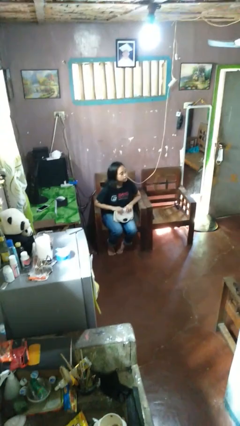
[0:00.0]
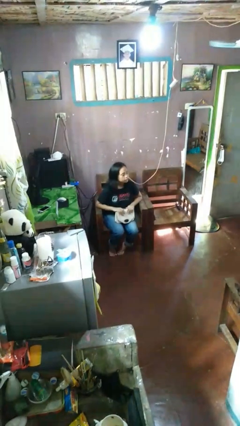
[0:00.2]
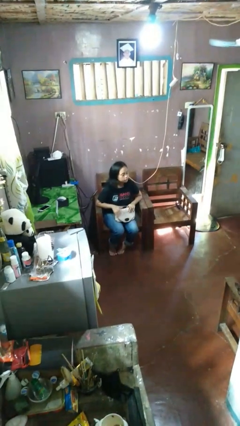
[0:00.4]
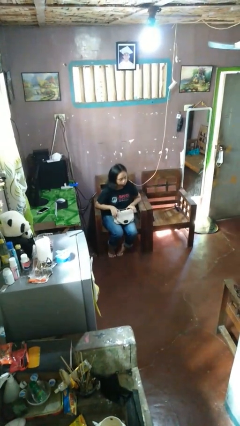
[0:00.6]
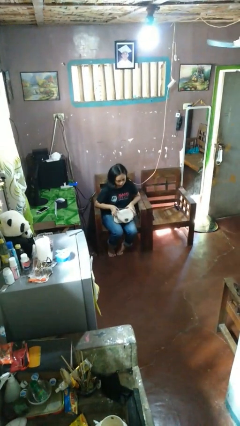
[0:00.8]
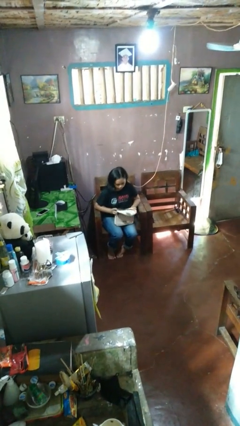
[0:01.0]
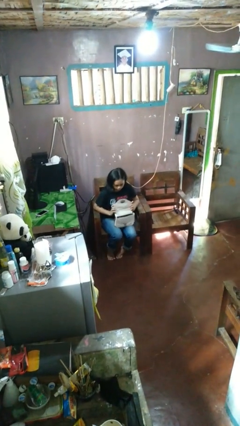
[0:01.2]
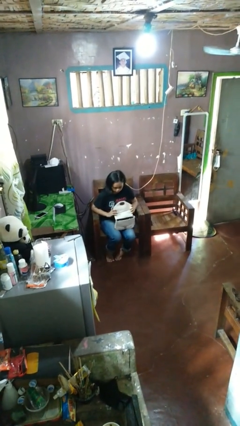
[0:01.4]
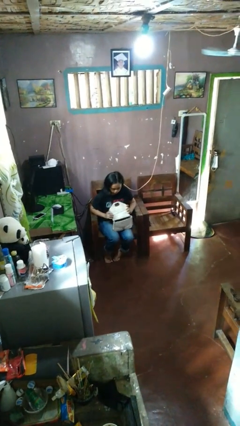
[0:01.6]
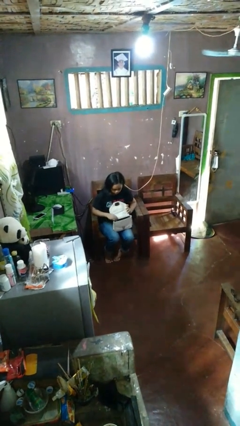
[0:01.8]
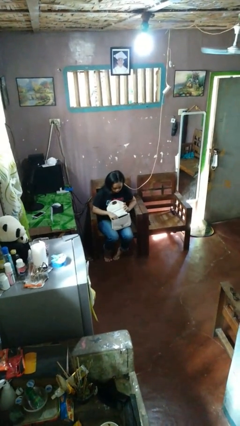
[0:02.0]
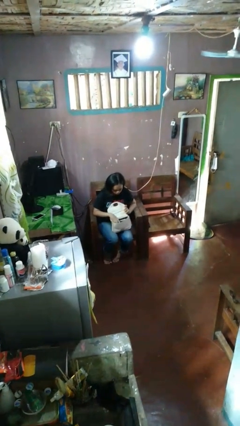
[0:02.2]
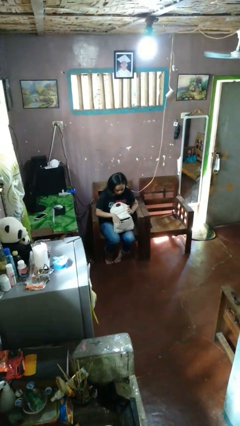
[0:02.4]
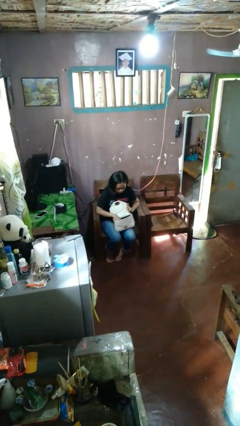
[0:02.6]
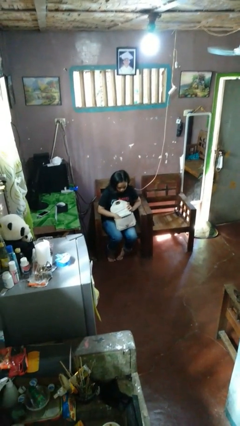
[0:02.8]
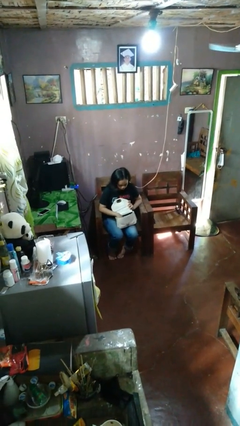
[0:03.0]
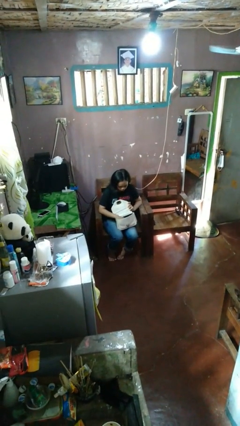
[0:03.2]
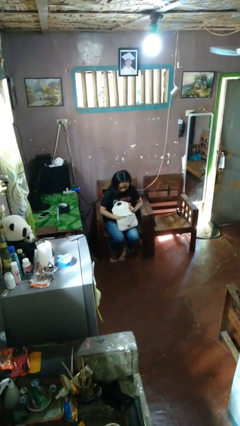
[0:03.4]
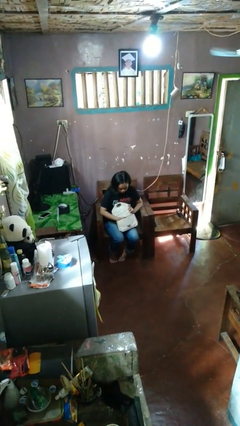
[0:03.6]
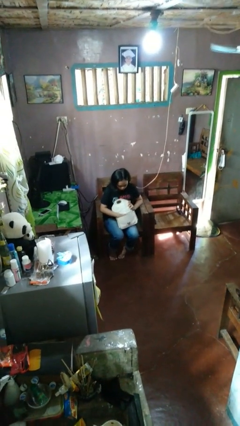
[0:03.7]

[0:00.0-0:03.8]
person searches in purse

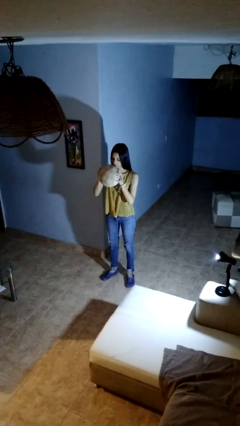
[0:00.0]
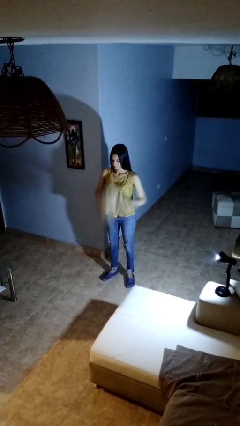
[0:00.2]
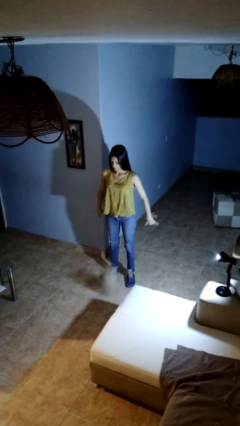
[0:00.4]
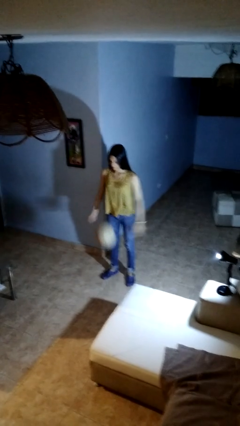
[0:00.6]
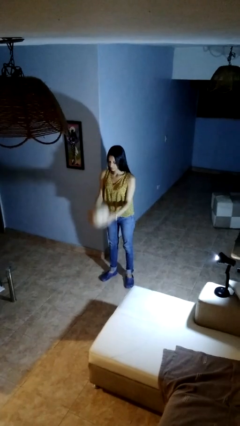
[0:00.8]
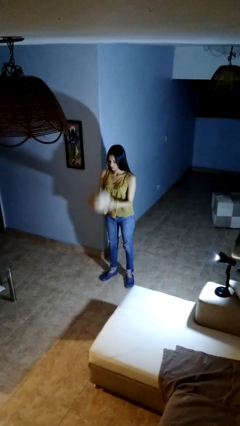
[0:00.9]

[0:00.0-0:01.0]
person bounces ball on floor

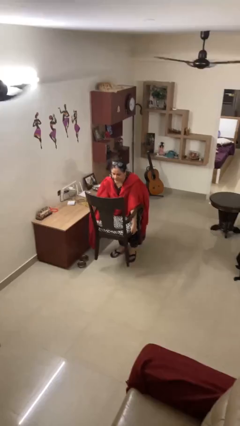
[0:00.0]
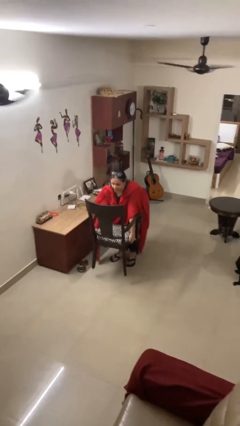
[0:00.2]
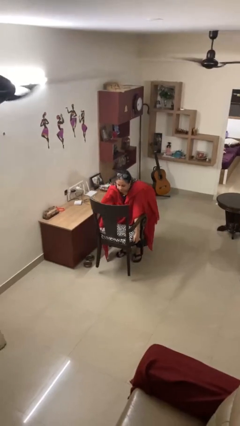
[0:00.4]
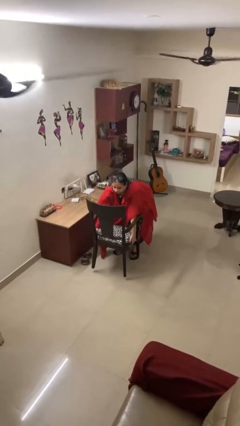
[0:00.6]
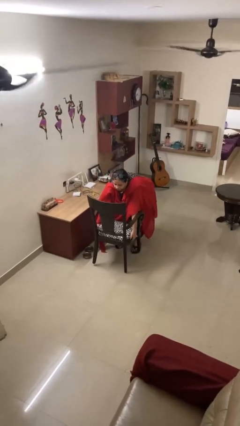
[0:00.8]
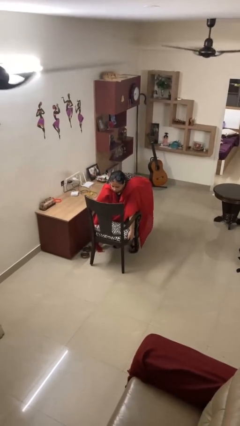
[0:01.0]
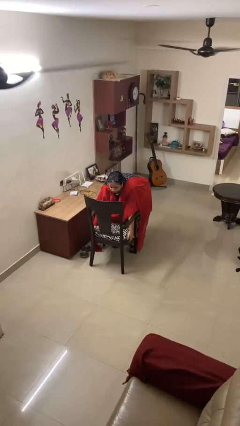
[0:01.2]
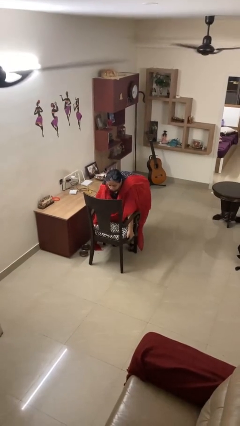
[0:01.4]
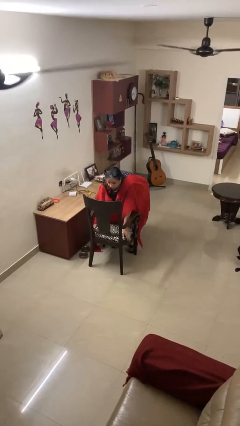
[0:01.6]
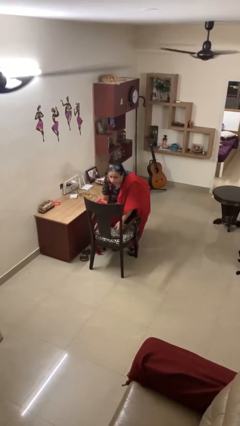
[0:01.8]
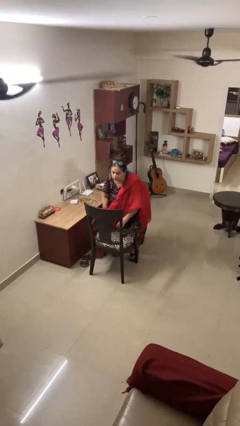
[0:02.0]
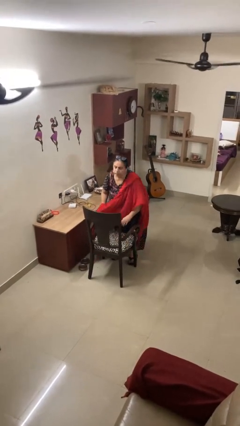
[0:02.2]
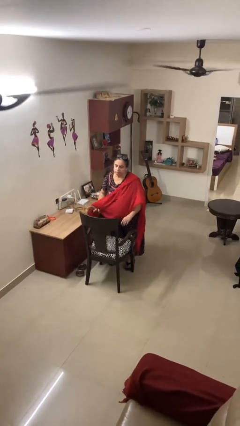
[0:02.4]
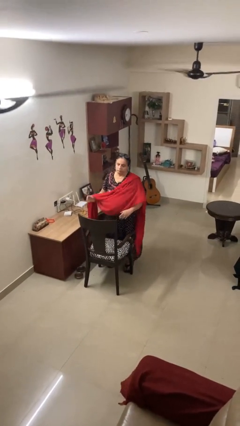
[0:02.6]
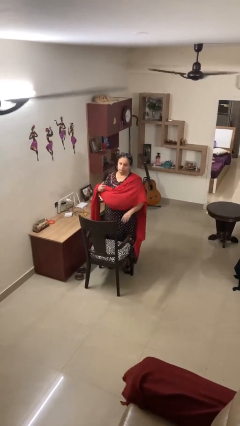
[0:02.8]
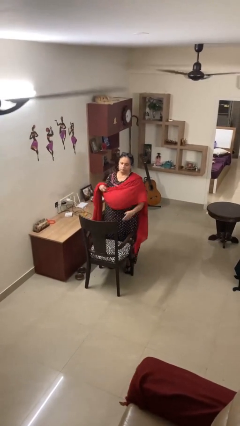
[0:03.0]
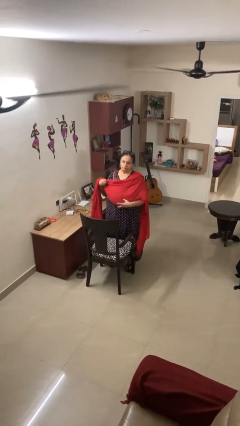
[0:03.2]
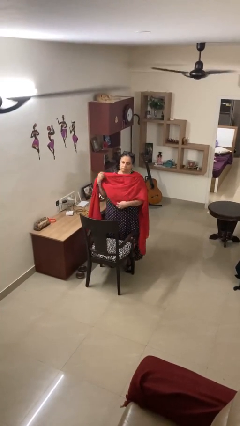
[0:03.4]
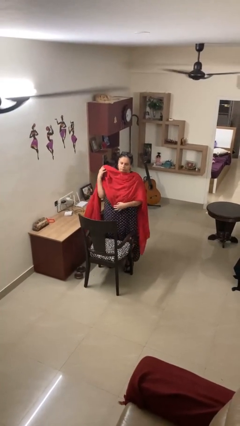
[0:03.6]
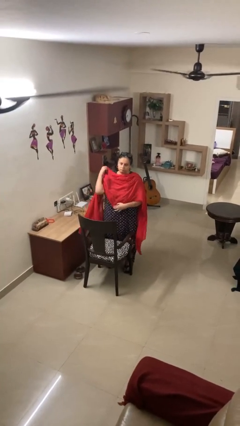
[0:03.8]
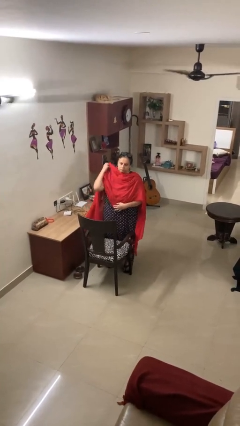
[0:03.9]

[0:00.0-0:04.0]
person puts down object on floor

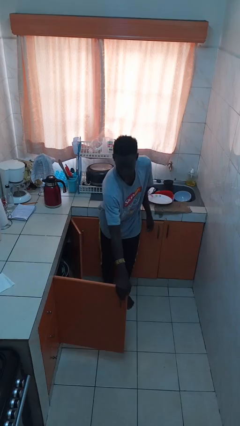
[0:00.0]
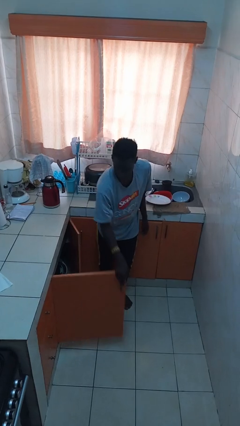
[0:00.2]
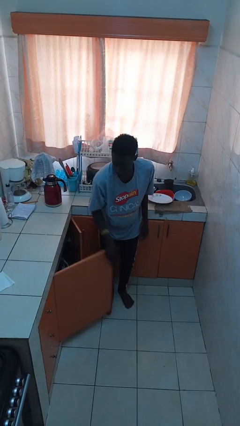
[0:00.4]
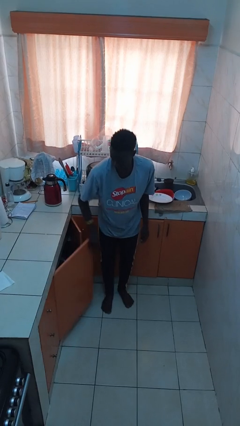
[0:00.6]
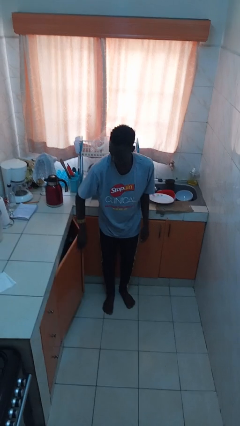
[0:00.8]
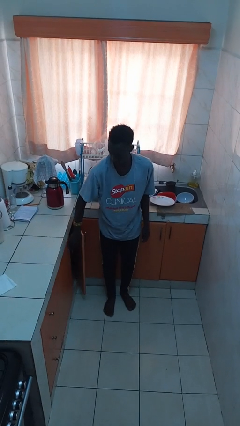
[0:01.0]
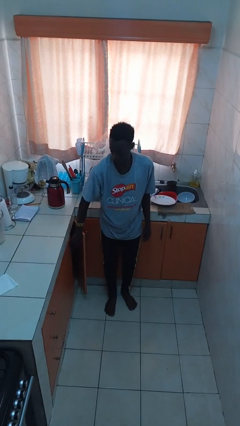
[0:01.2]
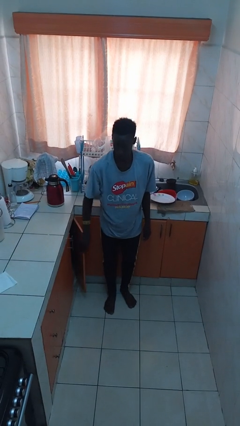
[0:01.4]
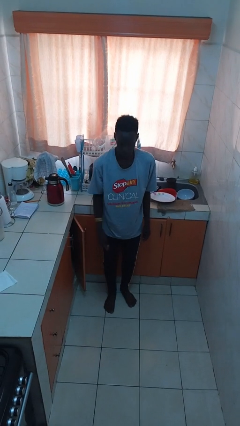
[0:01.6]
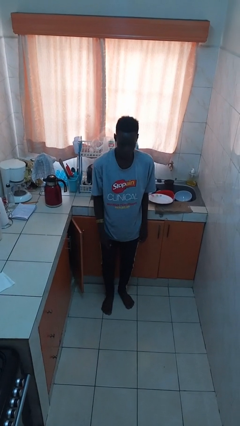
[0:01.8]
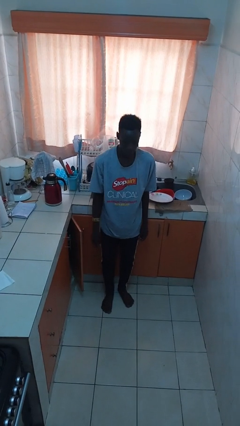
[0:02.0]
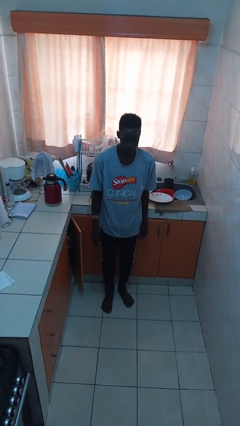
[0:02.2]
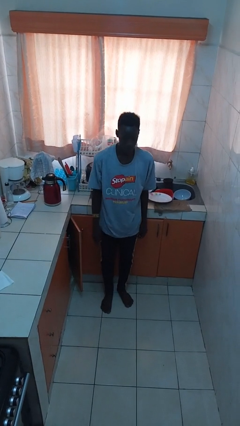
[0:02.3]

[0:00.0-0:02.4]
person closes cabinet

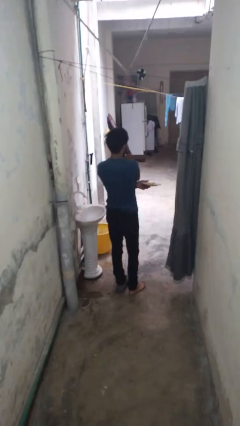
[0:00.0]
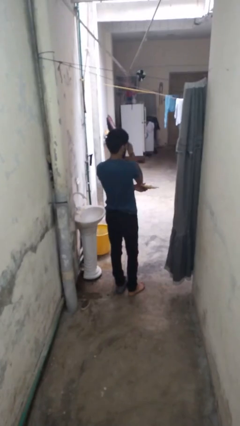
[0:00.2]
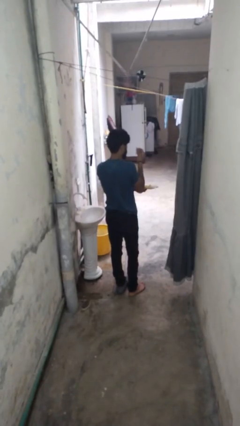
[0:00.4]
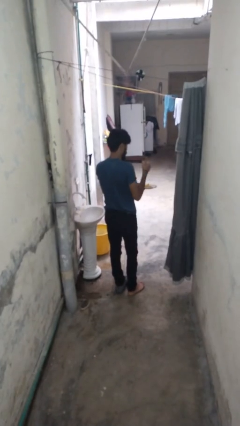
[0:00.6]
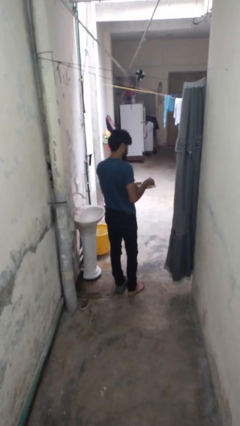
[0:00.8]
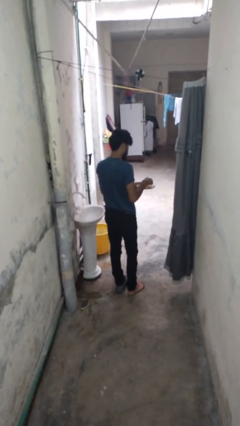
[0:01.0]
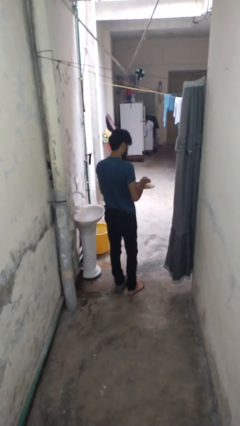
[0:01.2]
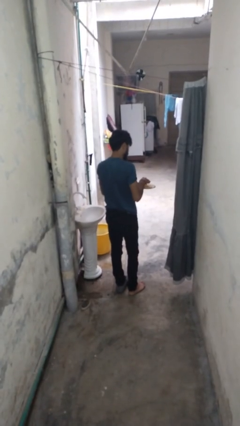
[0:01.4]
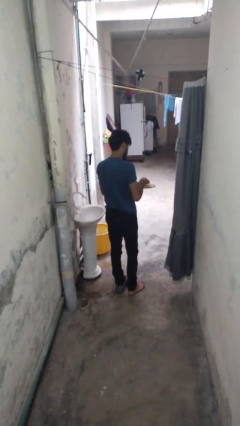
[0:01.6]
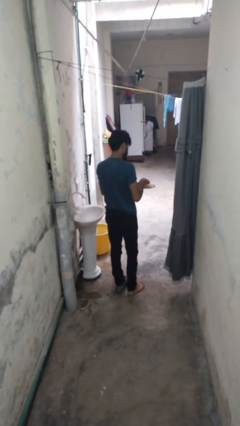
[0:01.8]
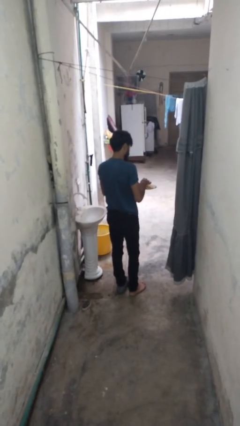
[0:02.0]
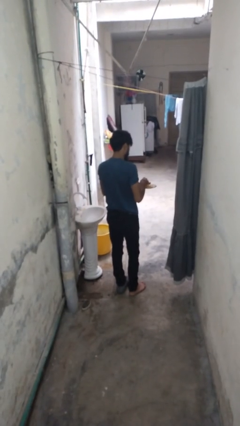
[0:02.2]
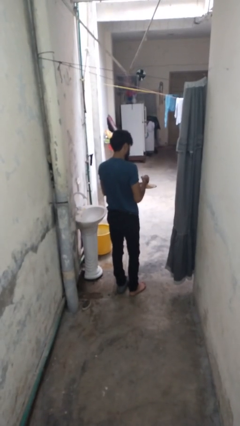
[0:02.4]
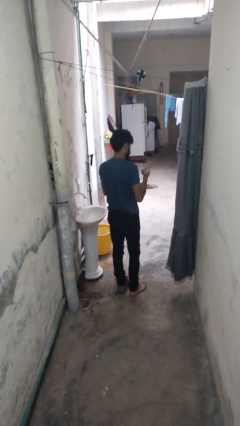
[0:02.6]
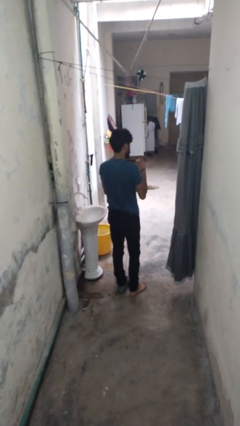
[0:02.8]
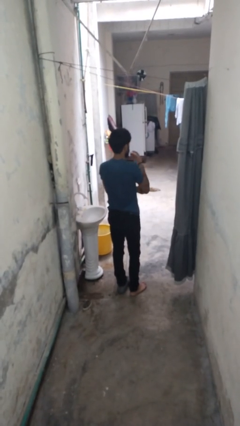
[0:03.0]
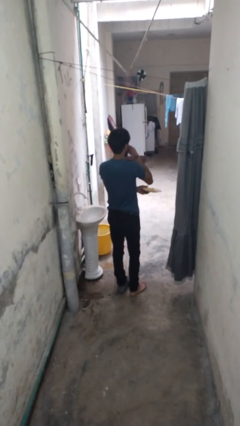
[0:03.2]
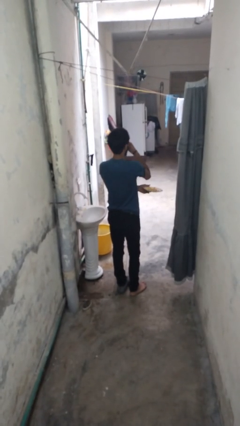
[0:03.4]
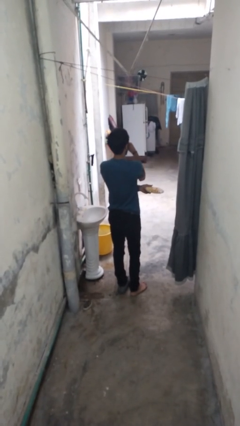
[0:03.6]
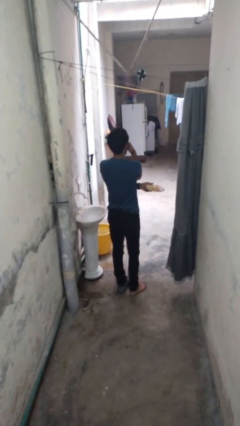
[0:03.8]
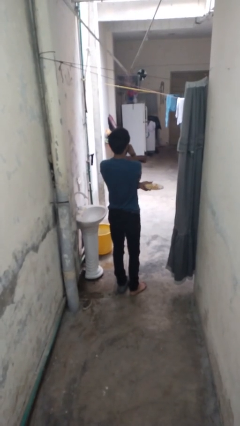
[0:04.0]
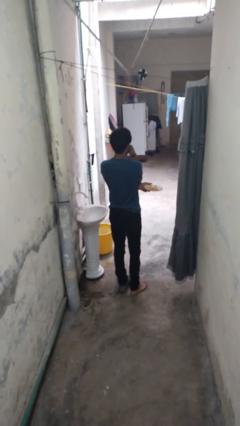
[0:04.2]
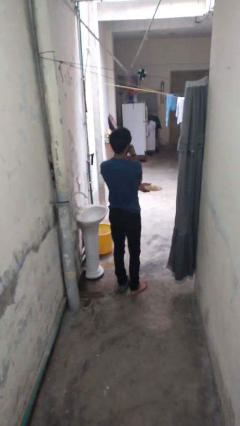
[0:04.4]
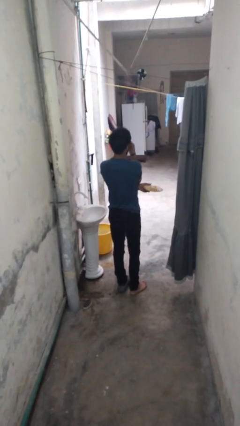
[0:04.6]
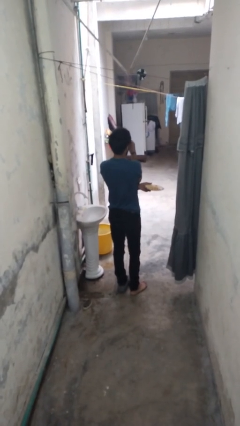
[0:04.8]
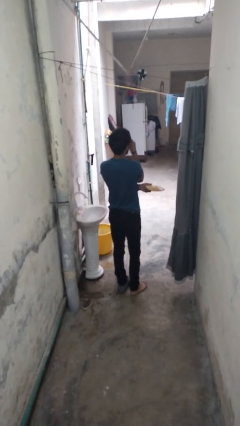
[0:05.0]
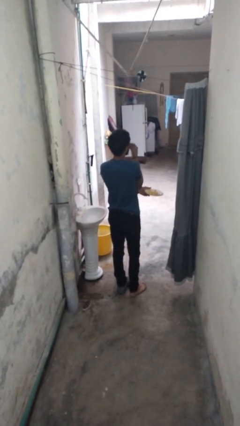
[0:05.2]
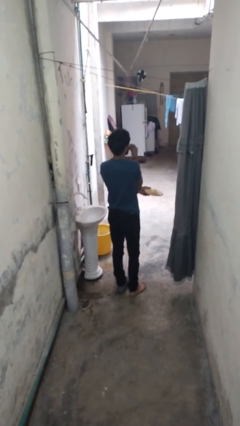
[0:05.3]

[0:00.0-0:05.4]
person eats with hands

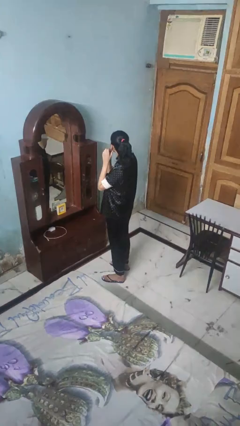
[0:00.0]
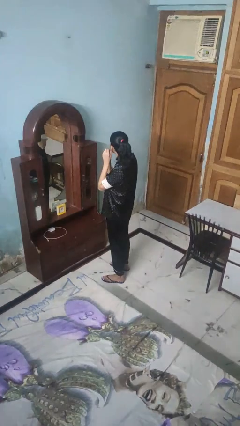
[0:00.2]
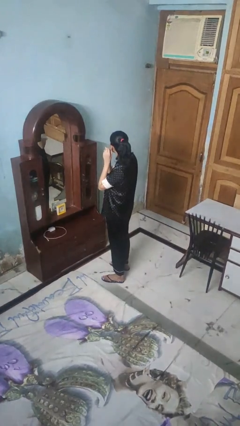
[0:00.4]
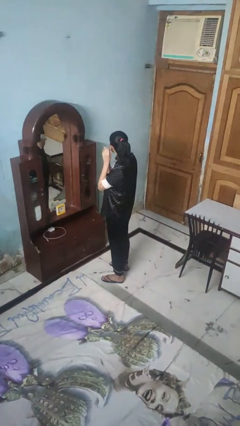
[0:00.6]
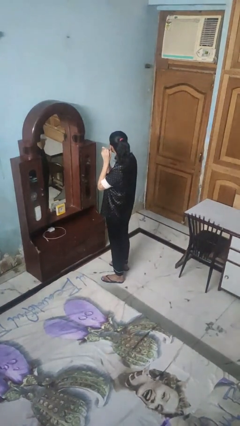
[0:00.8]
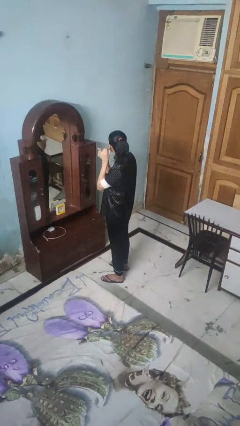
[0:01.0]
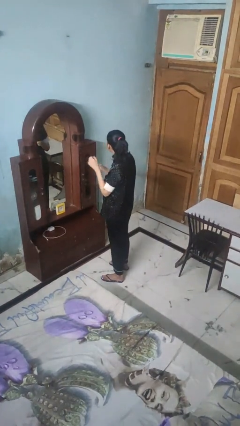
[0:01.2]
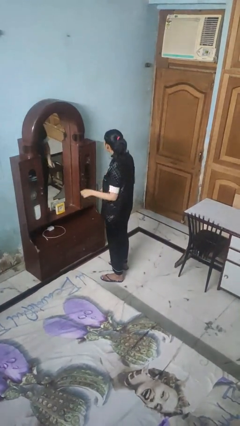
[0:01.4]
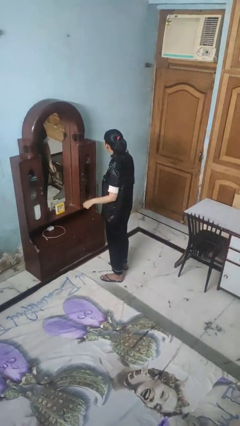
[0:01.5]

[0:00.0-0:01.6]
person takes off earrings
